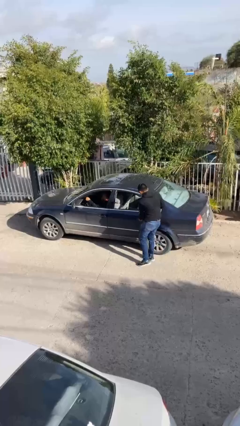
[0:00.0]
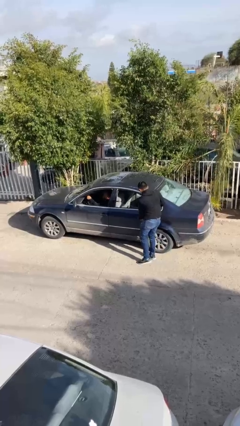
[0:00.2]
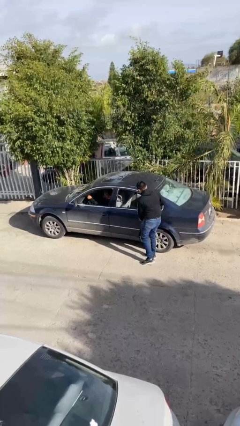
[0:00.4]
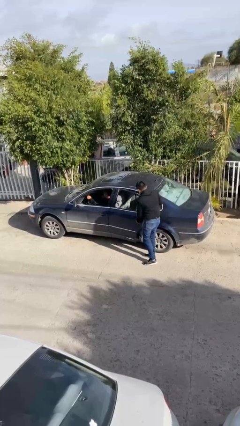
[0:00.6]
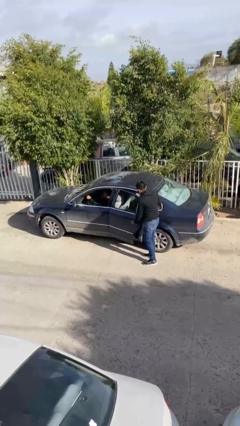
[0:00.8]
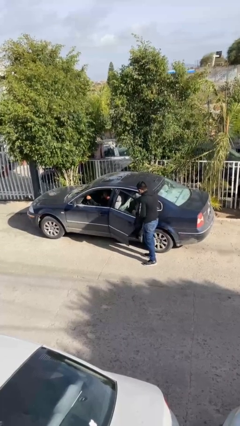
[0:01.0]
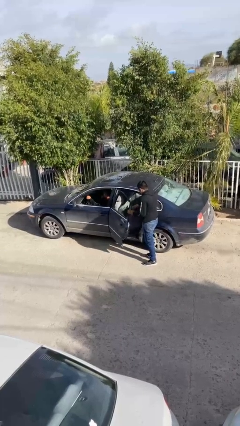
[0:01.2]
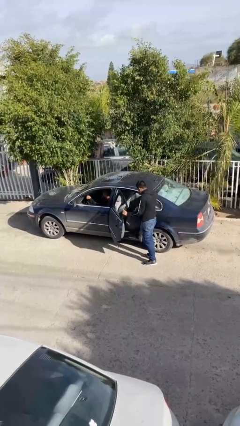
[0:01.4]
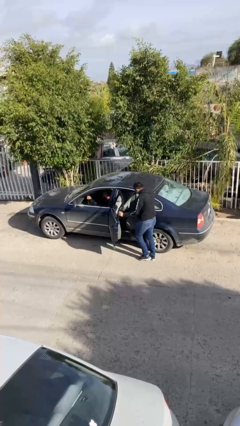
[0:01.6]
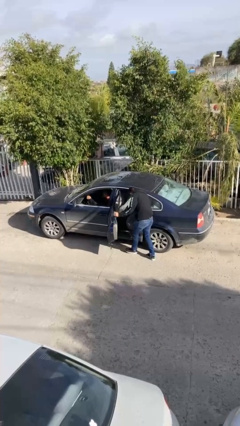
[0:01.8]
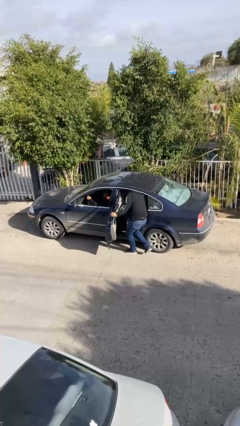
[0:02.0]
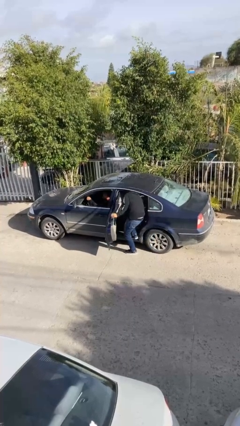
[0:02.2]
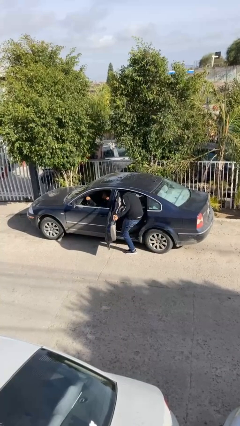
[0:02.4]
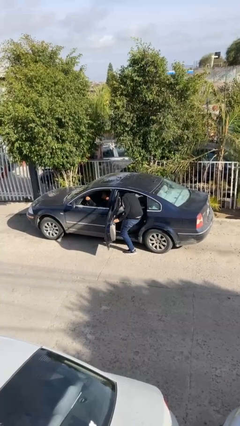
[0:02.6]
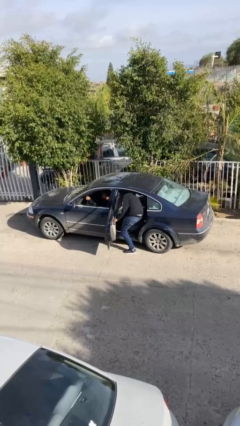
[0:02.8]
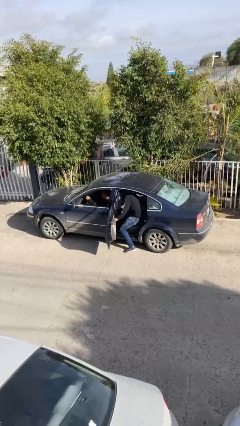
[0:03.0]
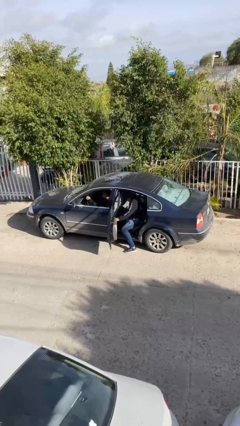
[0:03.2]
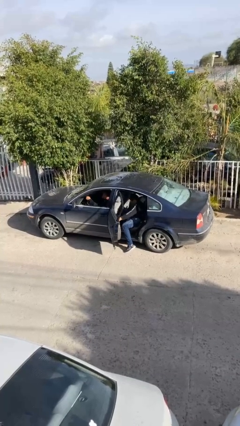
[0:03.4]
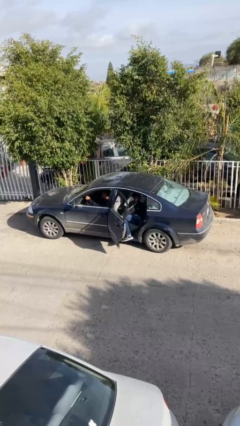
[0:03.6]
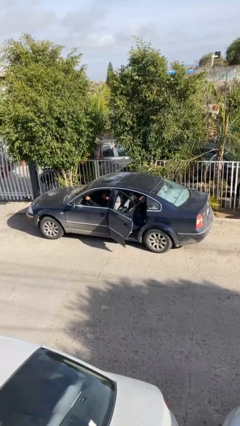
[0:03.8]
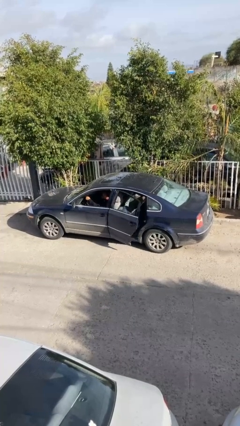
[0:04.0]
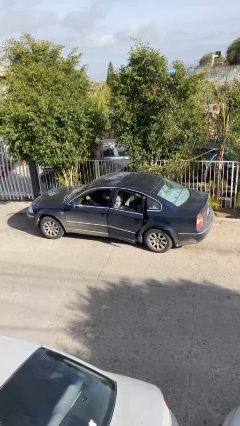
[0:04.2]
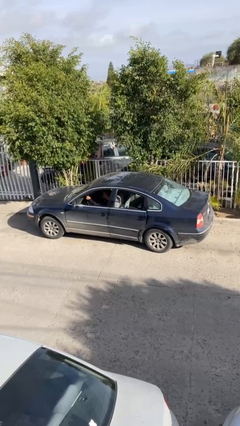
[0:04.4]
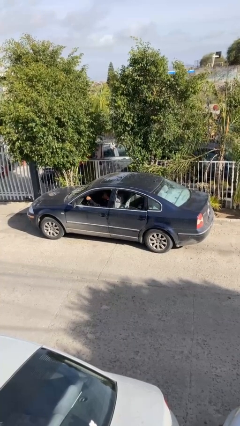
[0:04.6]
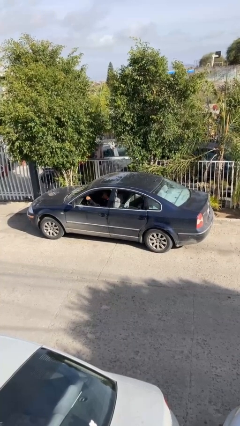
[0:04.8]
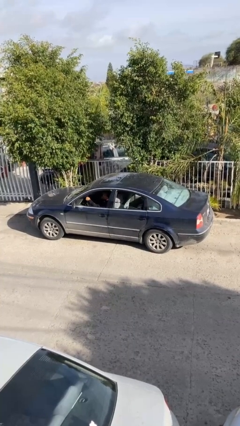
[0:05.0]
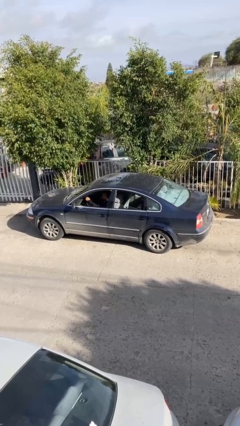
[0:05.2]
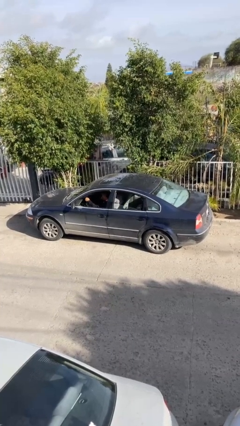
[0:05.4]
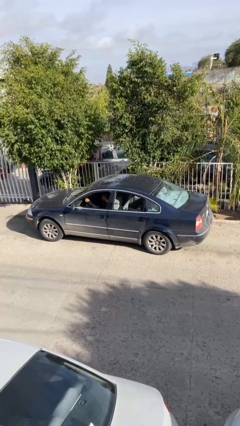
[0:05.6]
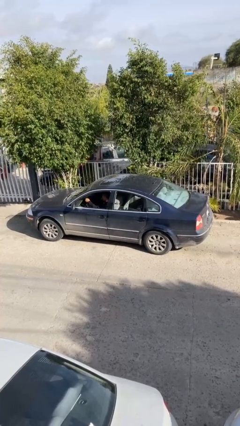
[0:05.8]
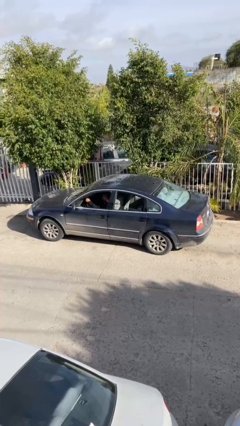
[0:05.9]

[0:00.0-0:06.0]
car picks up person

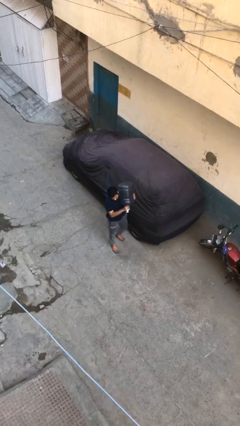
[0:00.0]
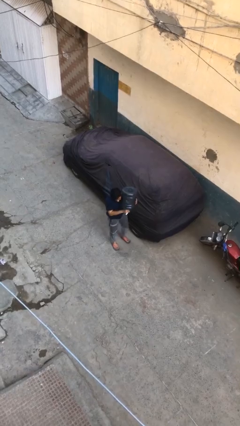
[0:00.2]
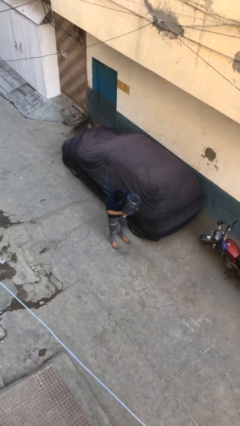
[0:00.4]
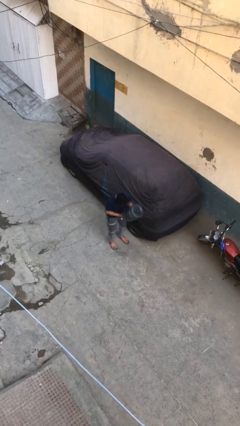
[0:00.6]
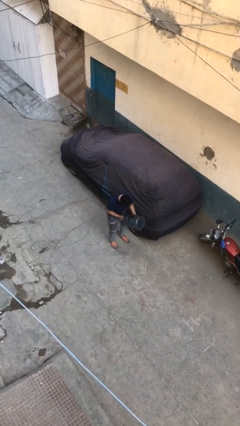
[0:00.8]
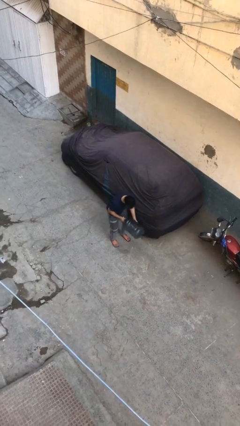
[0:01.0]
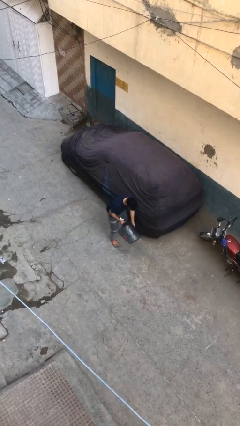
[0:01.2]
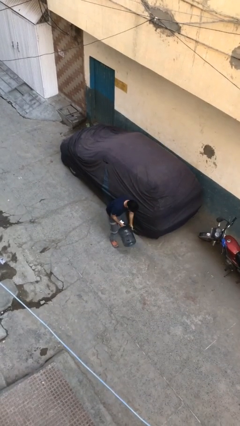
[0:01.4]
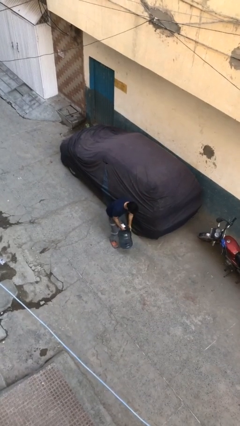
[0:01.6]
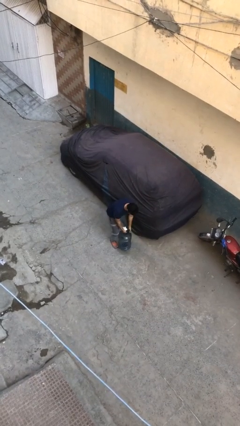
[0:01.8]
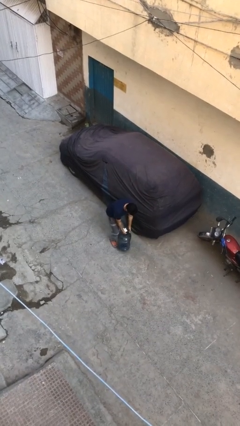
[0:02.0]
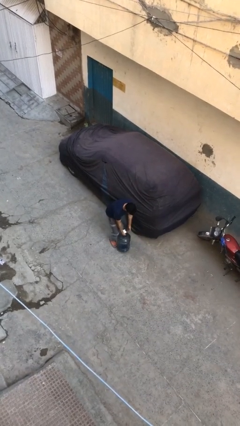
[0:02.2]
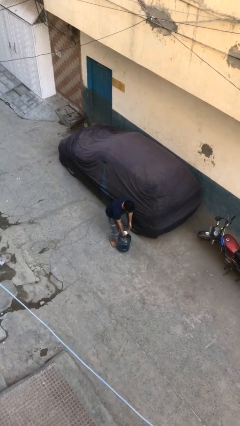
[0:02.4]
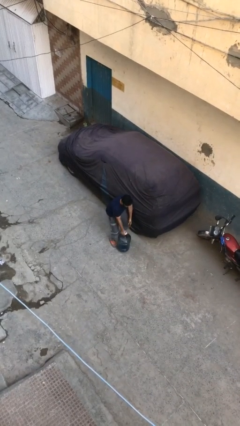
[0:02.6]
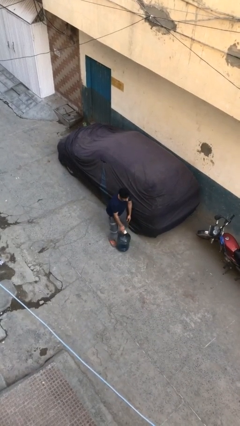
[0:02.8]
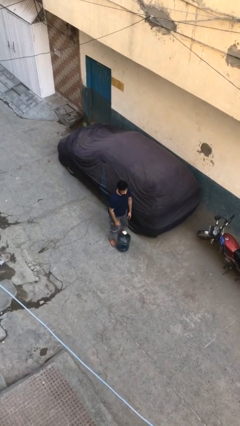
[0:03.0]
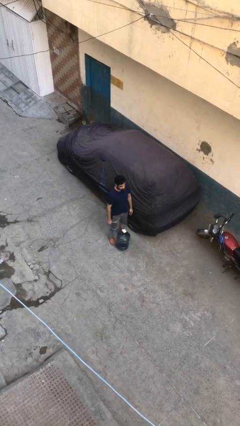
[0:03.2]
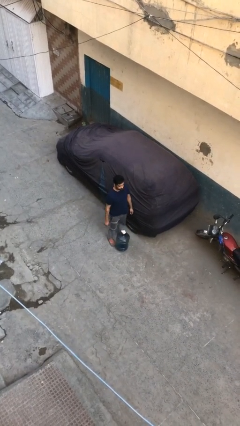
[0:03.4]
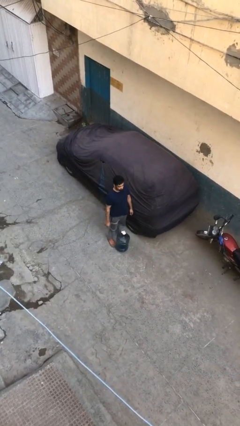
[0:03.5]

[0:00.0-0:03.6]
person puts down object on floor

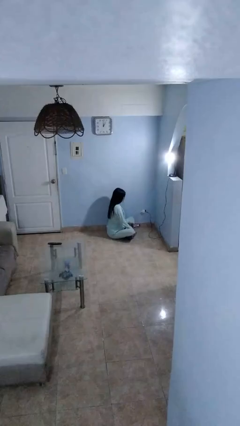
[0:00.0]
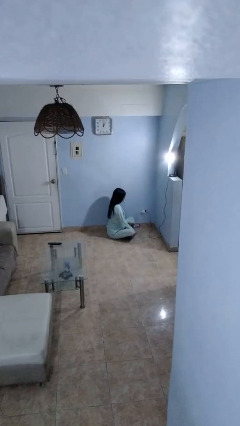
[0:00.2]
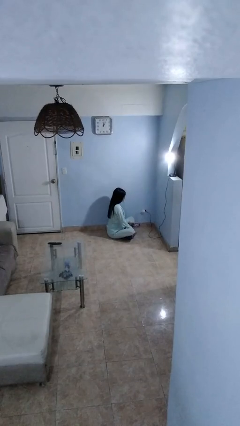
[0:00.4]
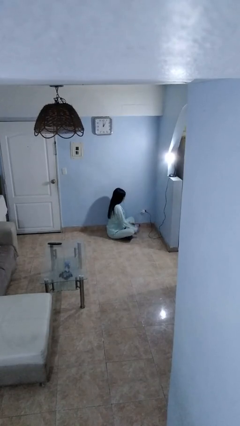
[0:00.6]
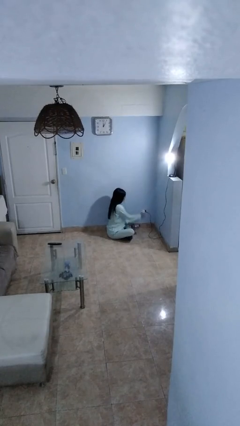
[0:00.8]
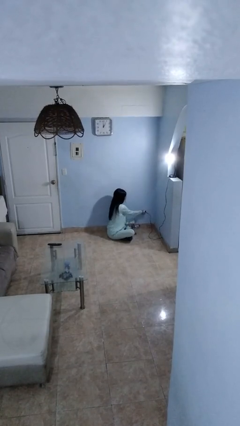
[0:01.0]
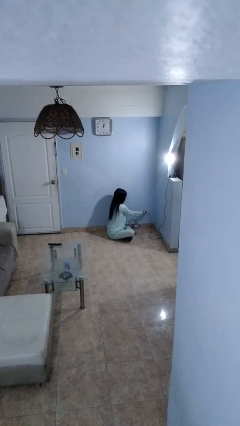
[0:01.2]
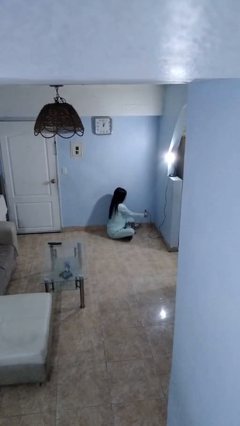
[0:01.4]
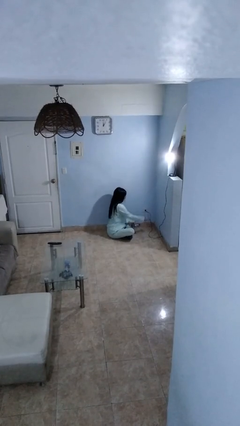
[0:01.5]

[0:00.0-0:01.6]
person unplugs from electrical socket

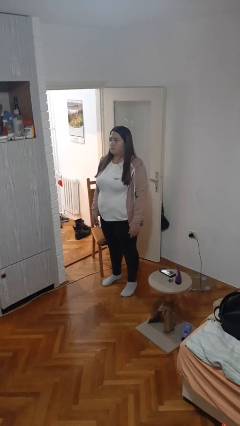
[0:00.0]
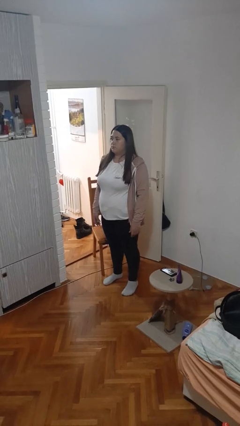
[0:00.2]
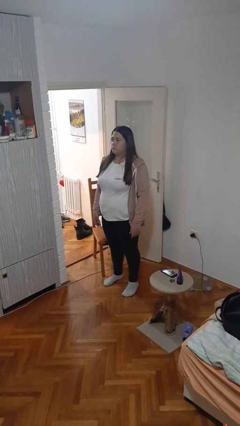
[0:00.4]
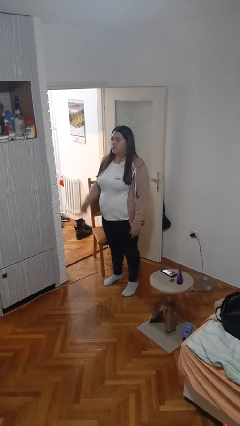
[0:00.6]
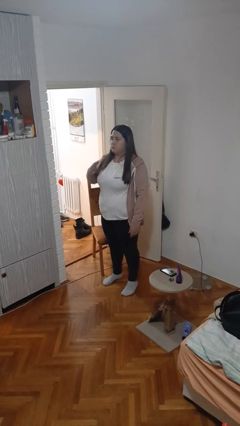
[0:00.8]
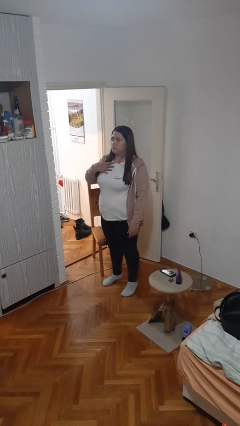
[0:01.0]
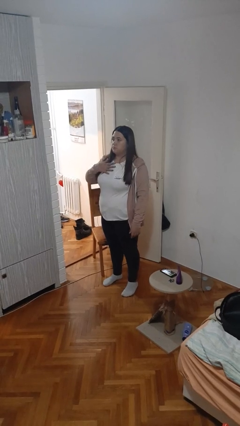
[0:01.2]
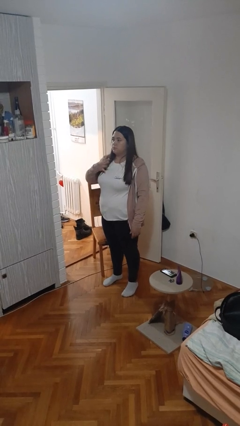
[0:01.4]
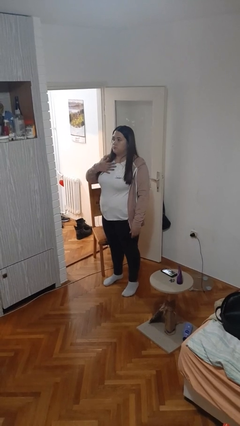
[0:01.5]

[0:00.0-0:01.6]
person drums on chest

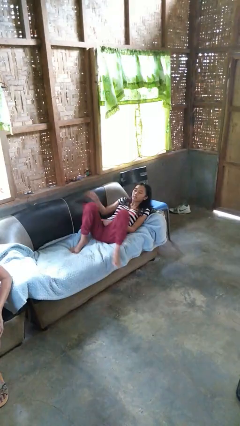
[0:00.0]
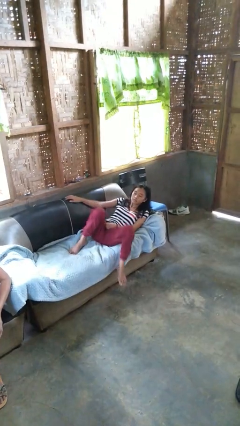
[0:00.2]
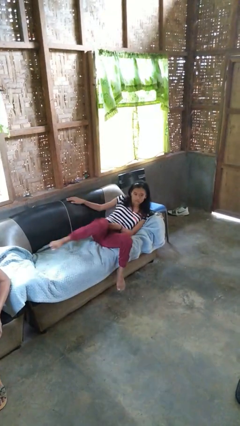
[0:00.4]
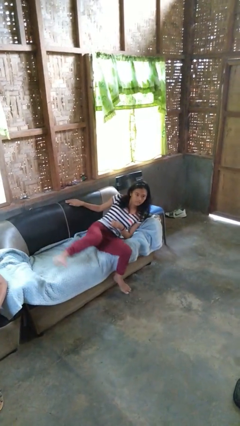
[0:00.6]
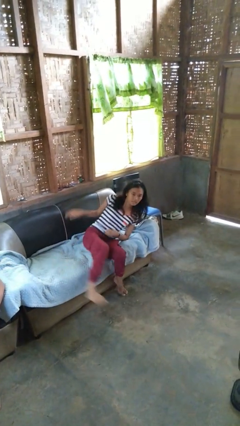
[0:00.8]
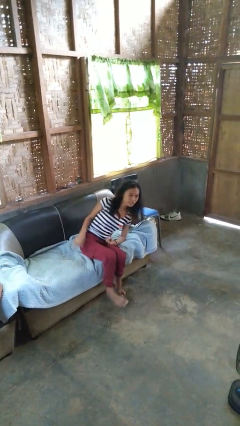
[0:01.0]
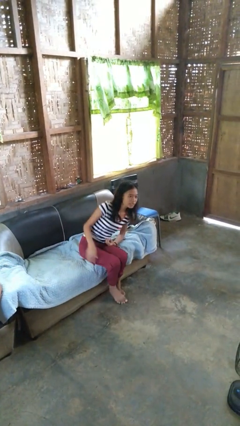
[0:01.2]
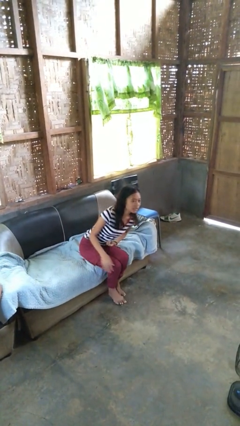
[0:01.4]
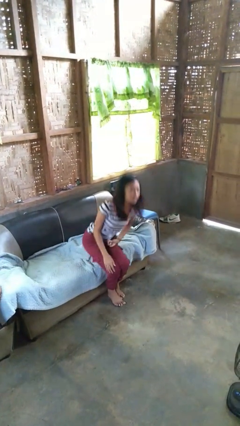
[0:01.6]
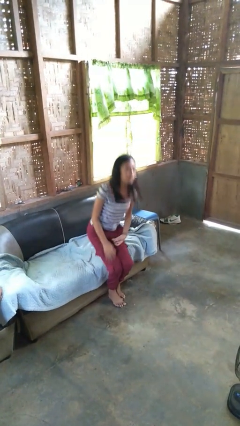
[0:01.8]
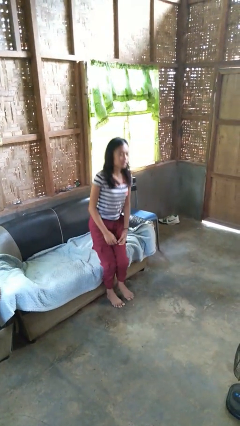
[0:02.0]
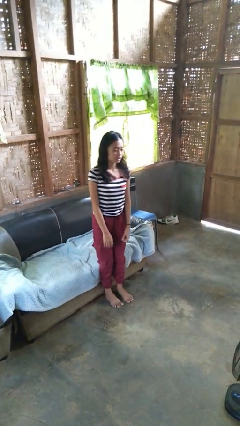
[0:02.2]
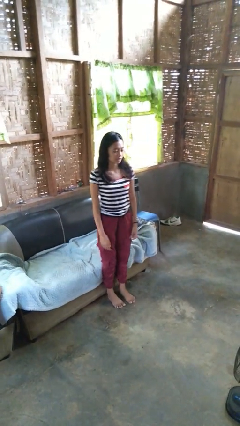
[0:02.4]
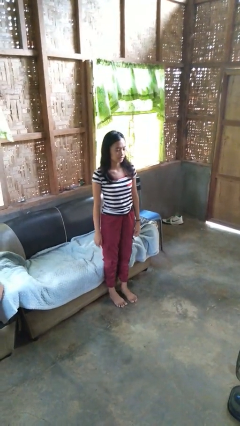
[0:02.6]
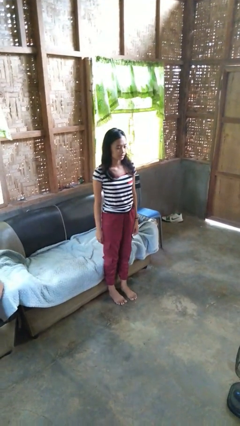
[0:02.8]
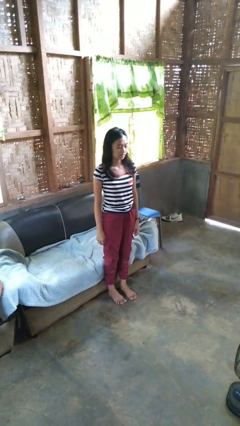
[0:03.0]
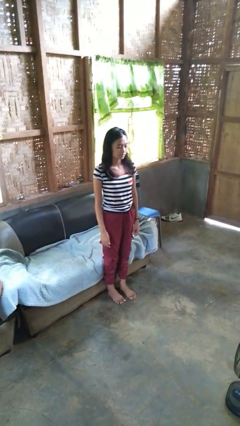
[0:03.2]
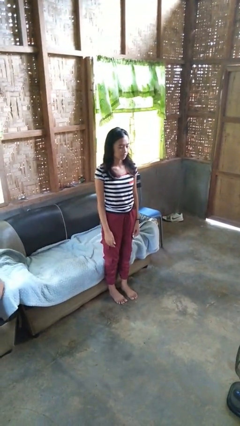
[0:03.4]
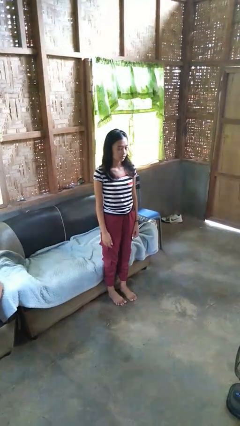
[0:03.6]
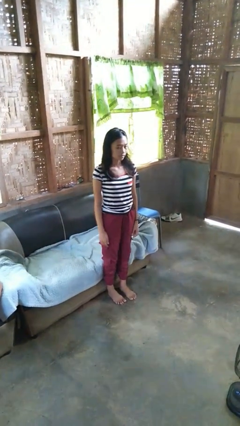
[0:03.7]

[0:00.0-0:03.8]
person stands up

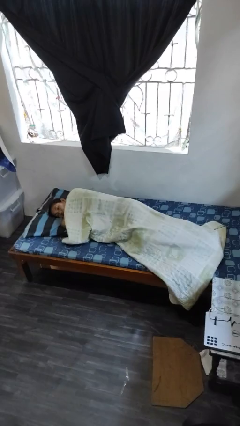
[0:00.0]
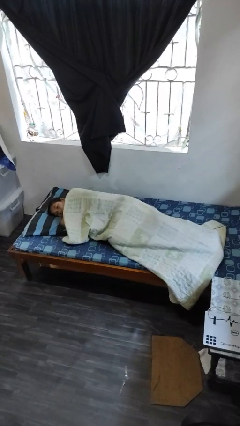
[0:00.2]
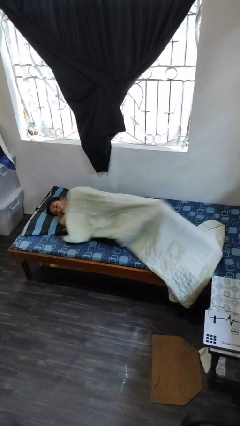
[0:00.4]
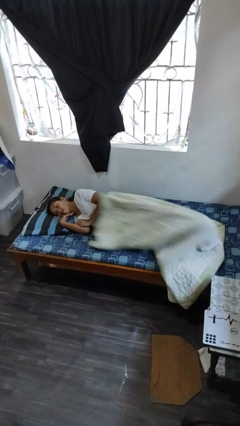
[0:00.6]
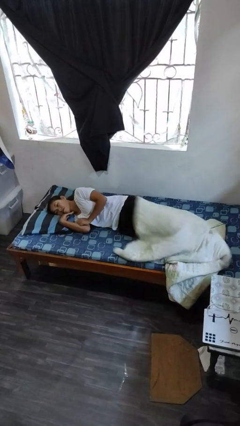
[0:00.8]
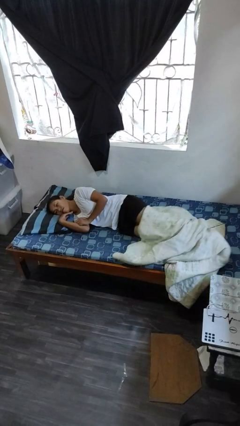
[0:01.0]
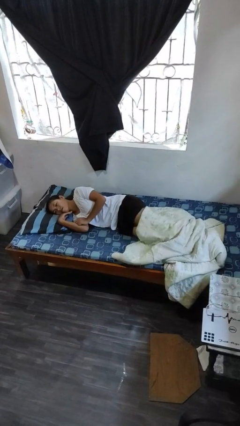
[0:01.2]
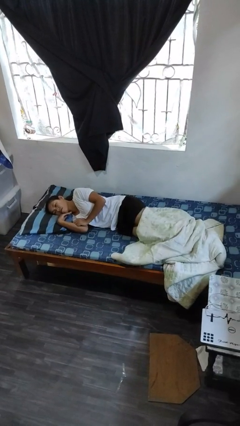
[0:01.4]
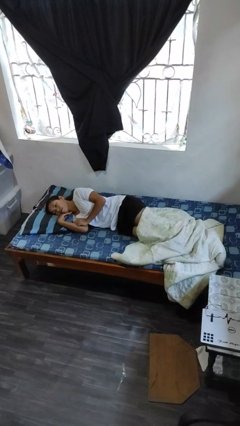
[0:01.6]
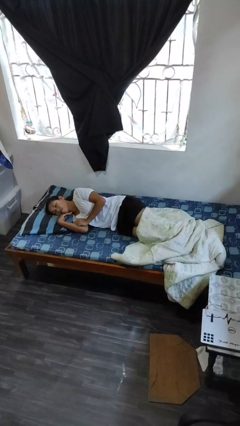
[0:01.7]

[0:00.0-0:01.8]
person uncovers with bedsheets
